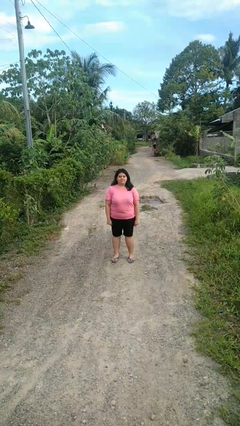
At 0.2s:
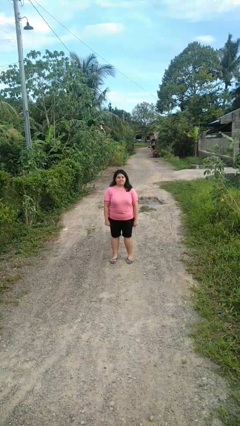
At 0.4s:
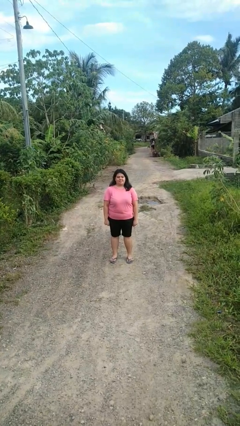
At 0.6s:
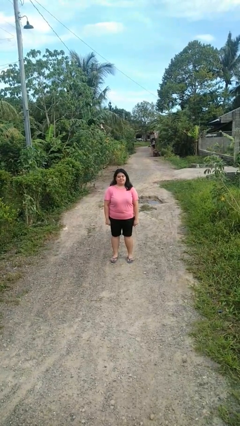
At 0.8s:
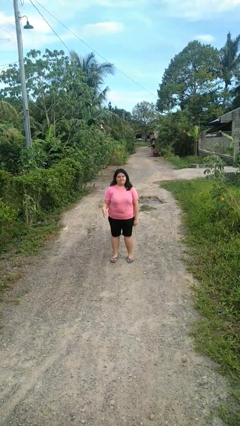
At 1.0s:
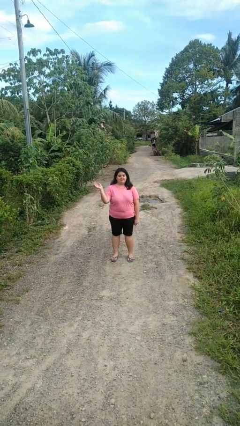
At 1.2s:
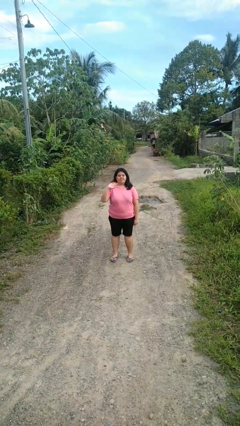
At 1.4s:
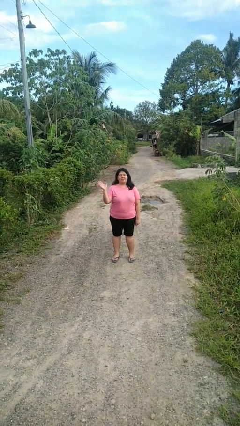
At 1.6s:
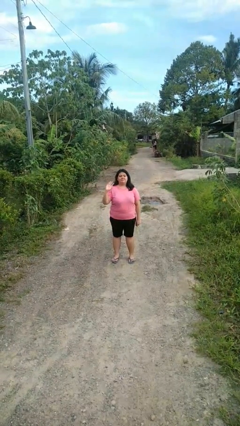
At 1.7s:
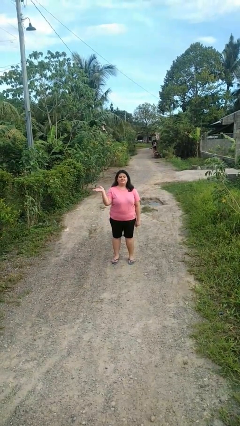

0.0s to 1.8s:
person waves at person

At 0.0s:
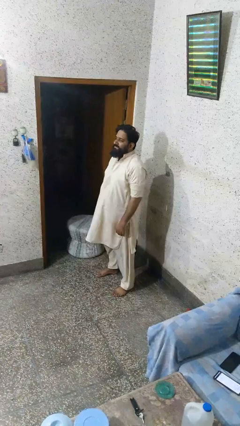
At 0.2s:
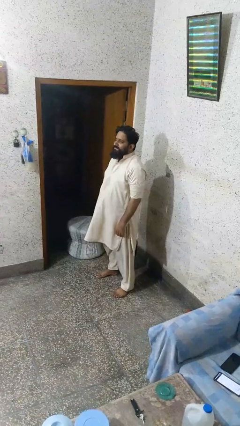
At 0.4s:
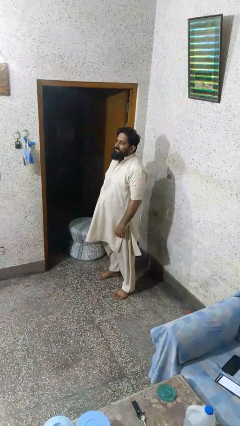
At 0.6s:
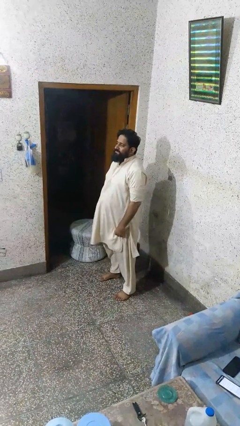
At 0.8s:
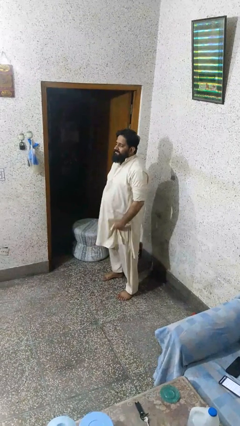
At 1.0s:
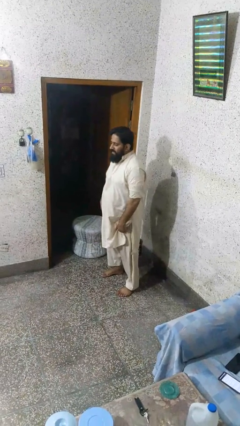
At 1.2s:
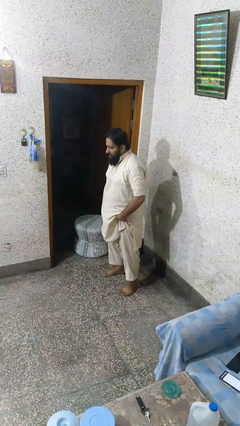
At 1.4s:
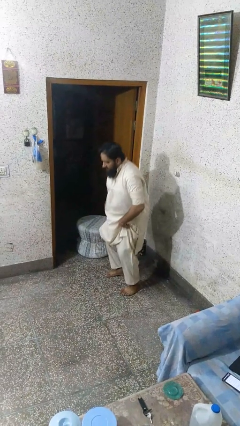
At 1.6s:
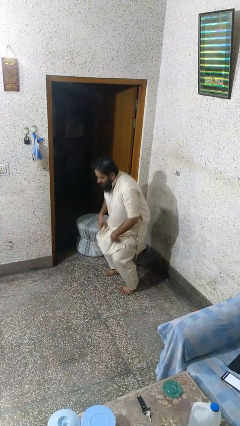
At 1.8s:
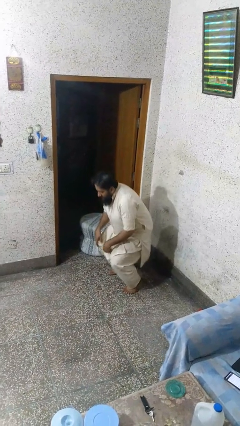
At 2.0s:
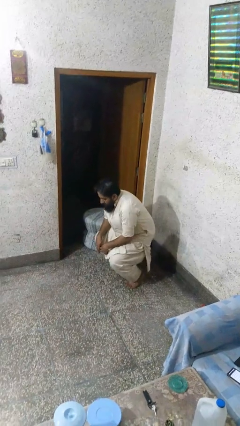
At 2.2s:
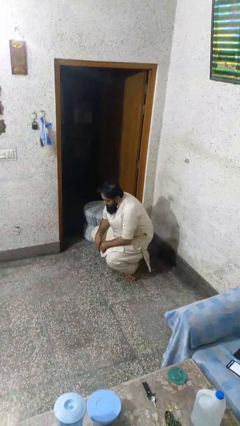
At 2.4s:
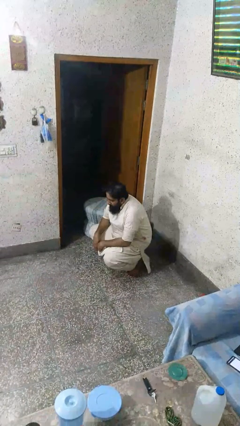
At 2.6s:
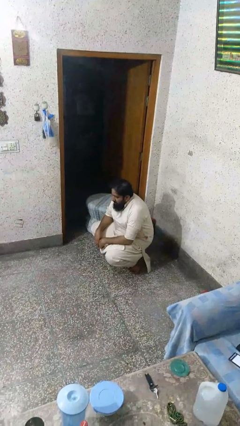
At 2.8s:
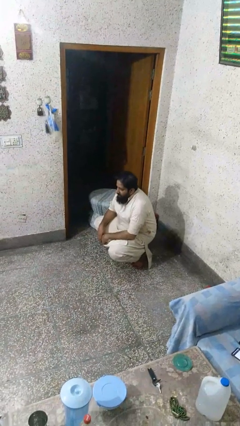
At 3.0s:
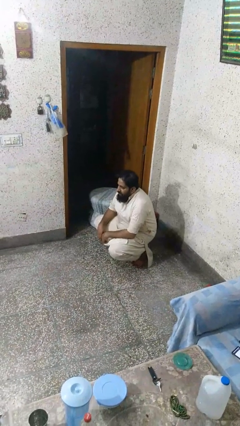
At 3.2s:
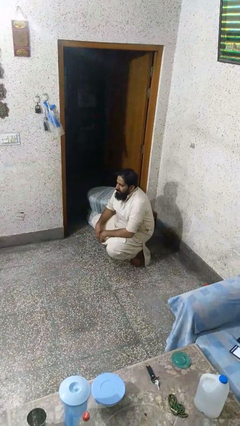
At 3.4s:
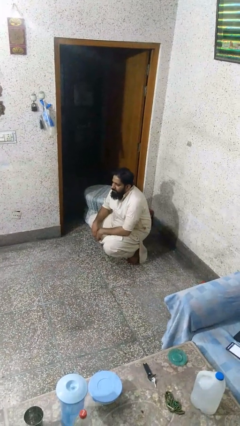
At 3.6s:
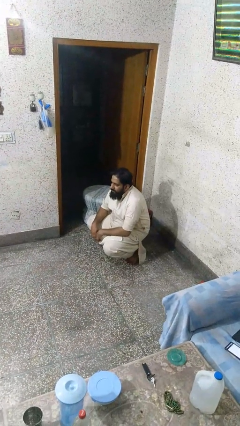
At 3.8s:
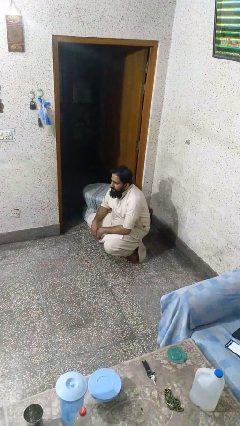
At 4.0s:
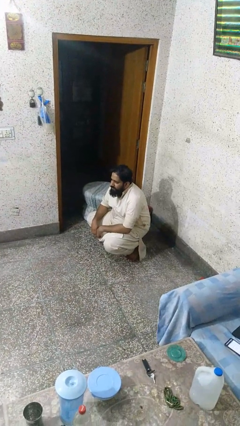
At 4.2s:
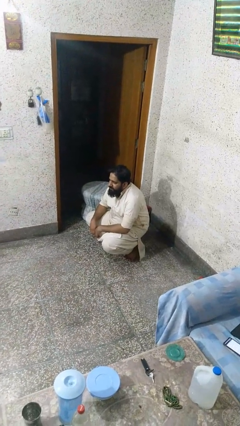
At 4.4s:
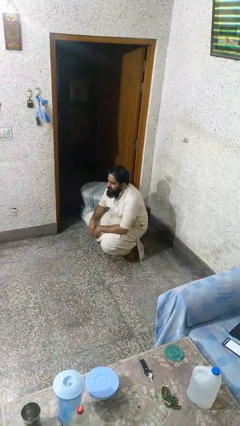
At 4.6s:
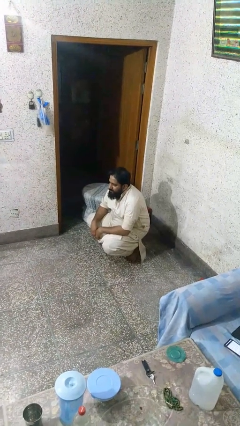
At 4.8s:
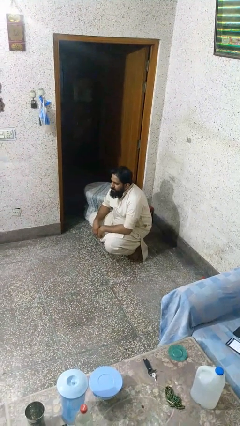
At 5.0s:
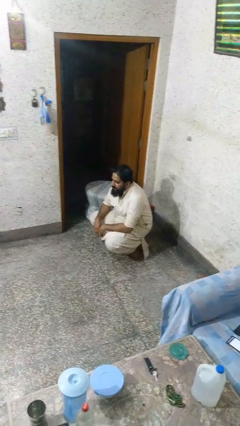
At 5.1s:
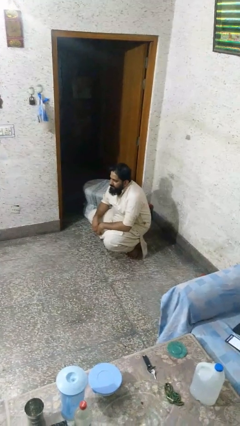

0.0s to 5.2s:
person squats

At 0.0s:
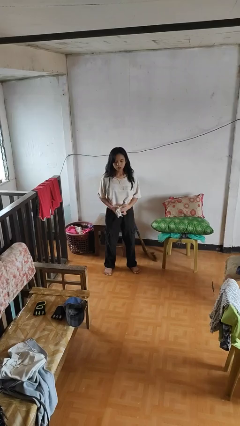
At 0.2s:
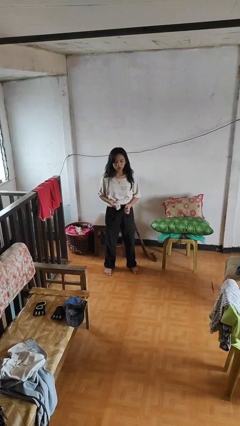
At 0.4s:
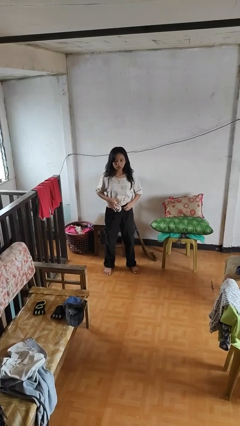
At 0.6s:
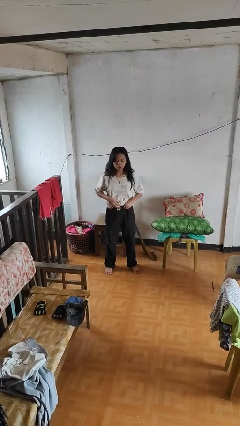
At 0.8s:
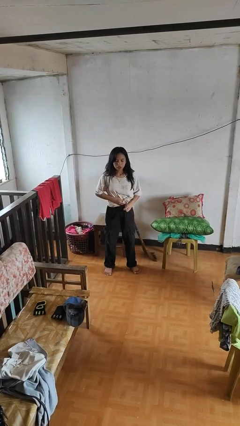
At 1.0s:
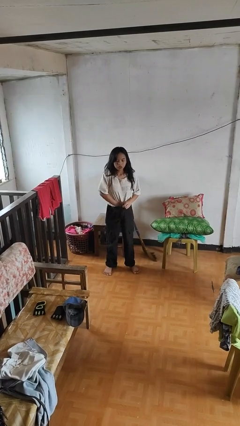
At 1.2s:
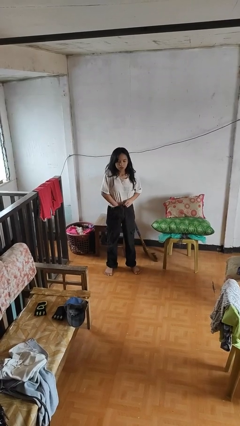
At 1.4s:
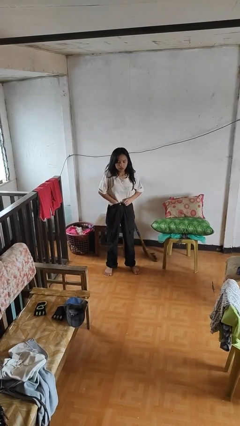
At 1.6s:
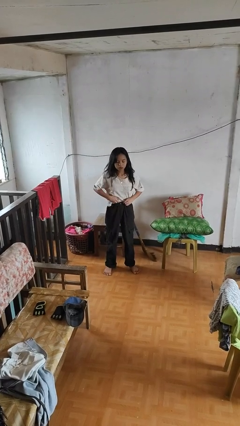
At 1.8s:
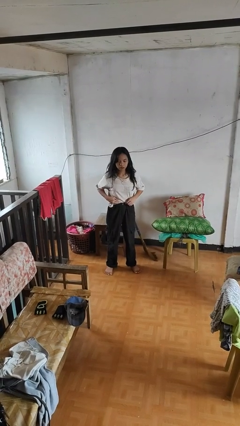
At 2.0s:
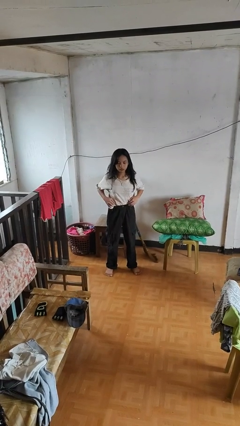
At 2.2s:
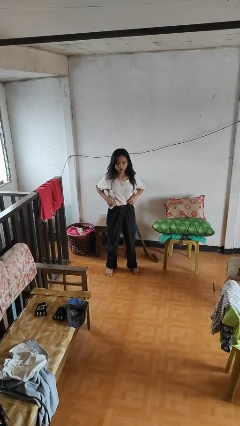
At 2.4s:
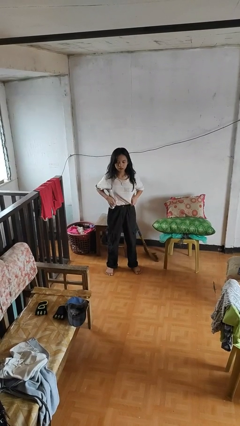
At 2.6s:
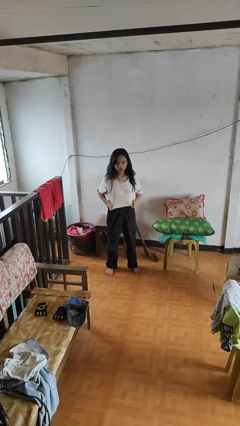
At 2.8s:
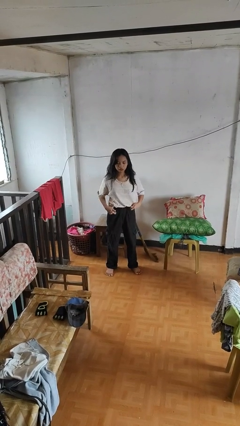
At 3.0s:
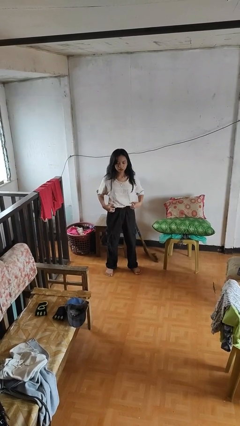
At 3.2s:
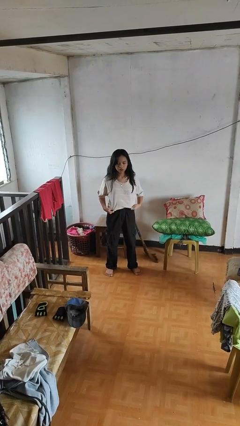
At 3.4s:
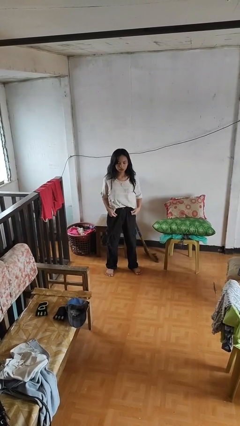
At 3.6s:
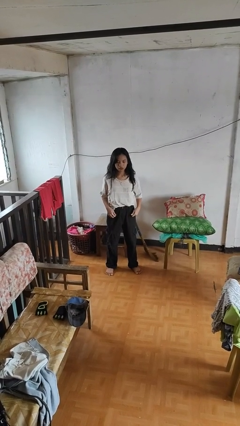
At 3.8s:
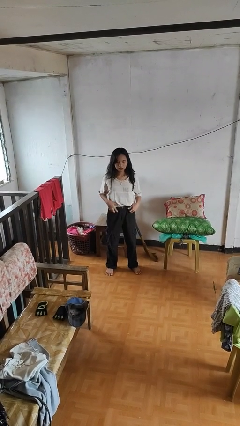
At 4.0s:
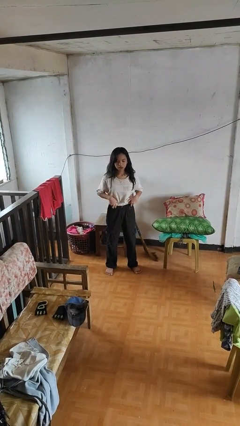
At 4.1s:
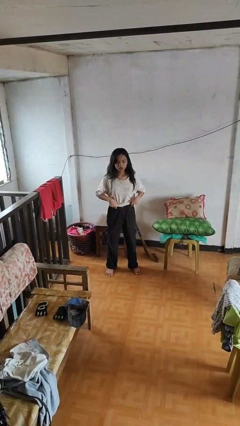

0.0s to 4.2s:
person tucks in shirt

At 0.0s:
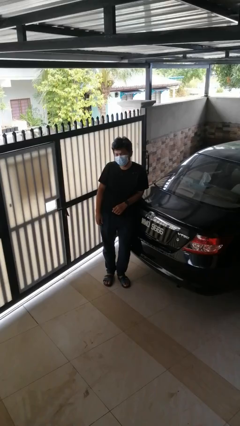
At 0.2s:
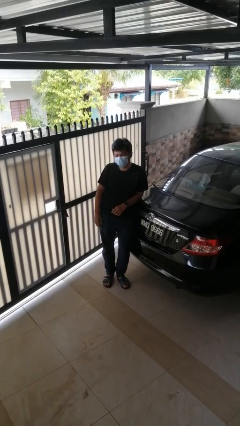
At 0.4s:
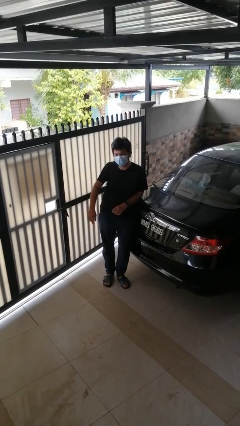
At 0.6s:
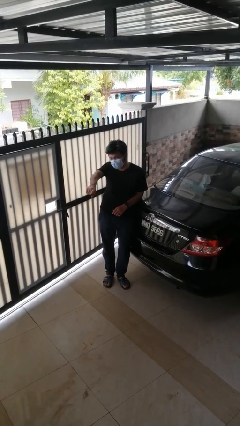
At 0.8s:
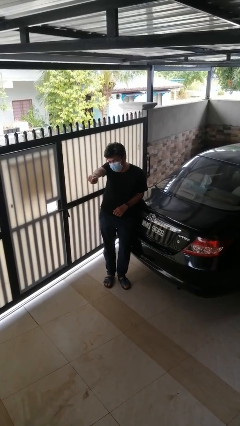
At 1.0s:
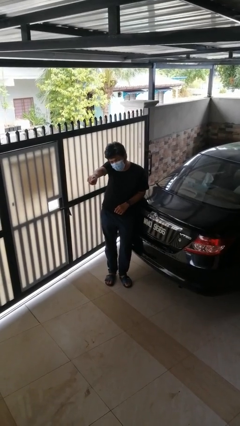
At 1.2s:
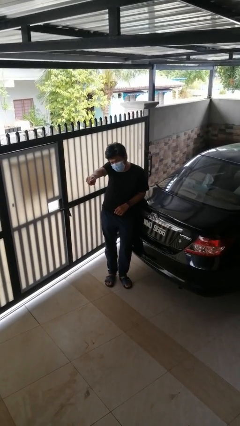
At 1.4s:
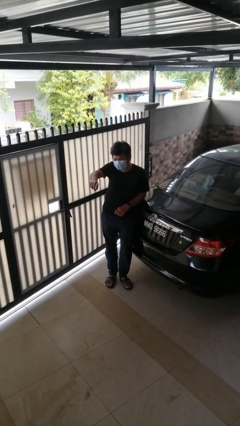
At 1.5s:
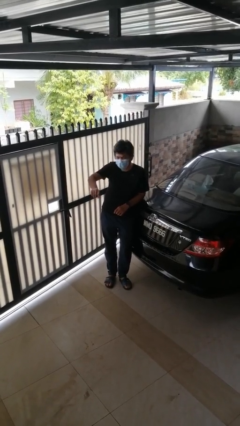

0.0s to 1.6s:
person points at person

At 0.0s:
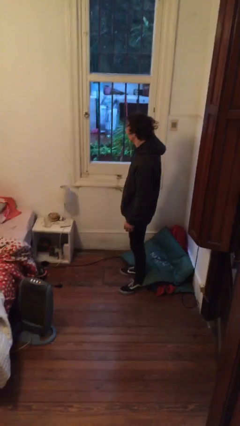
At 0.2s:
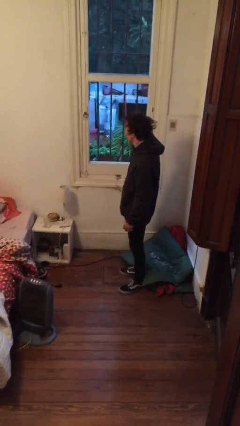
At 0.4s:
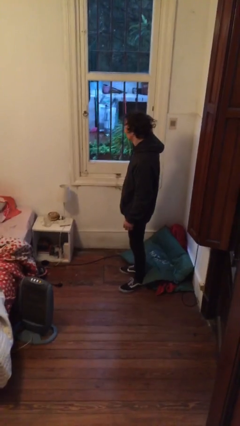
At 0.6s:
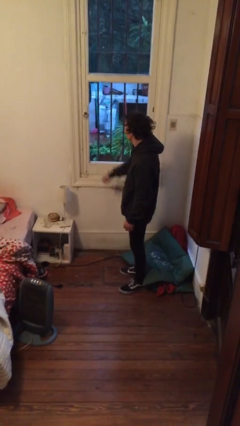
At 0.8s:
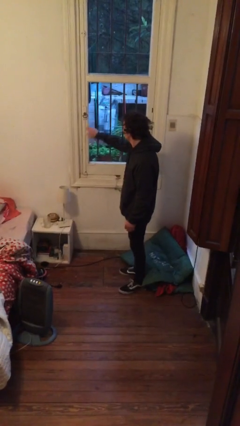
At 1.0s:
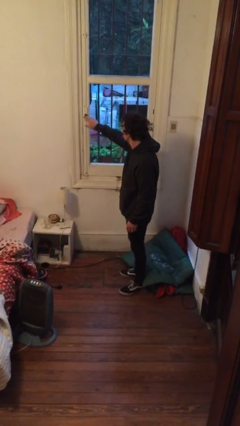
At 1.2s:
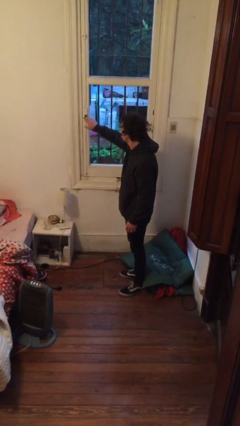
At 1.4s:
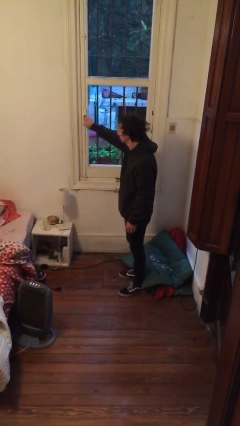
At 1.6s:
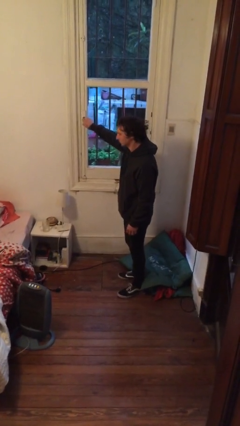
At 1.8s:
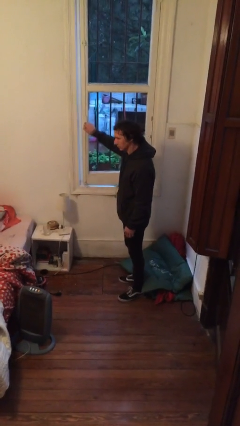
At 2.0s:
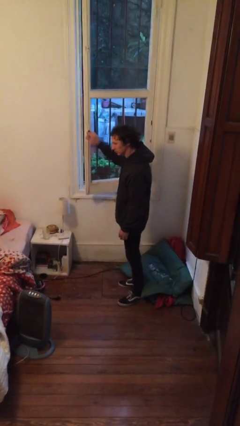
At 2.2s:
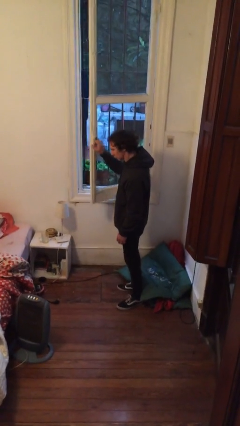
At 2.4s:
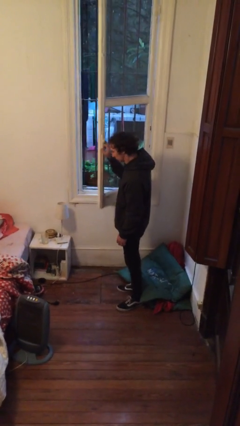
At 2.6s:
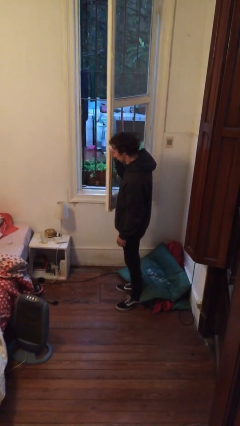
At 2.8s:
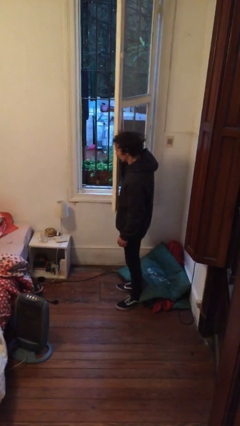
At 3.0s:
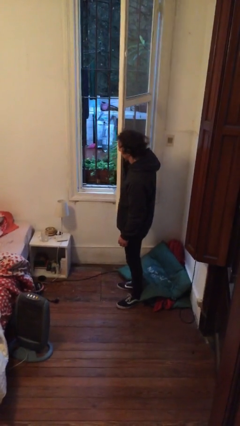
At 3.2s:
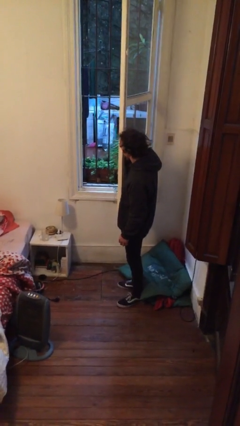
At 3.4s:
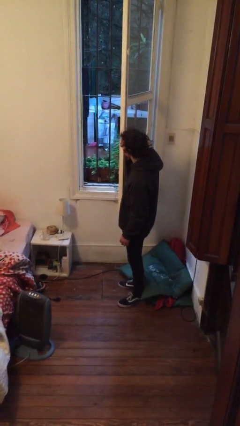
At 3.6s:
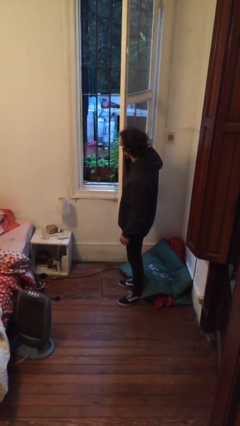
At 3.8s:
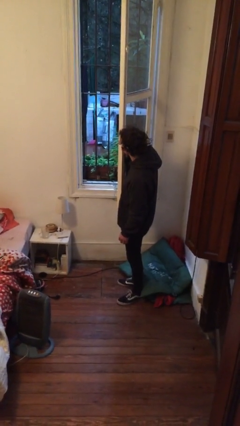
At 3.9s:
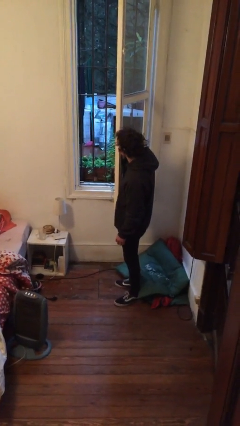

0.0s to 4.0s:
person opens home window

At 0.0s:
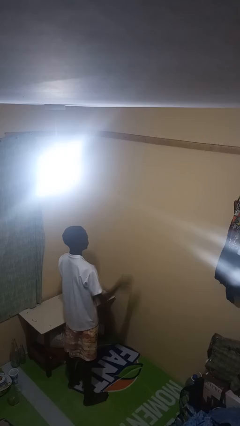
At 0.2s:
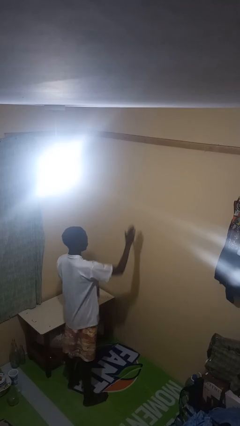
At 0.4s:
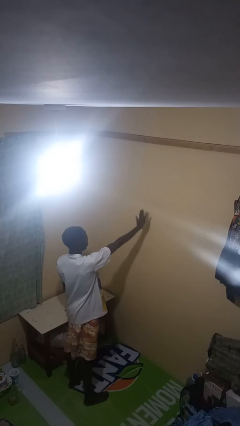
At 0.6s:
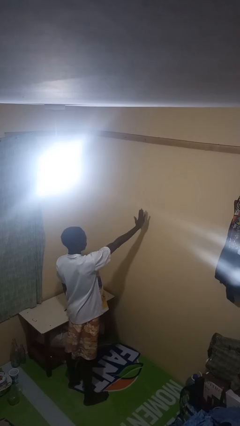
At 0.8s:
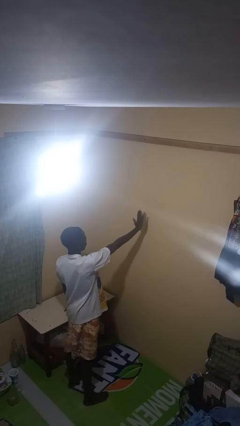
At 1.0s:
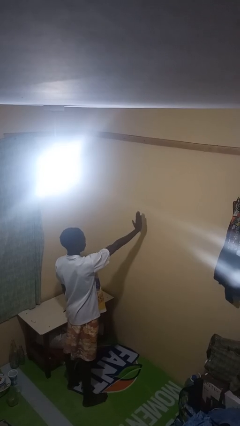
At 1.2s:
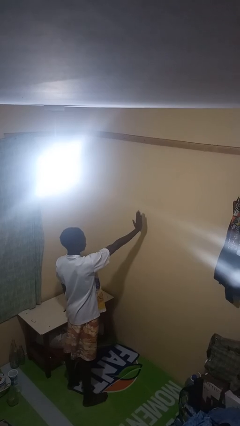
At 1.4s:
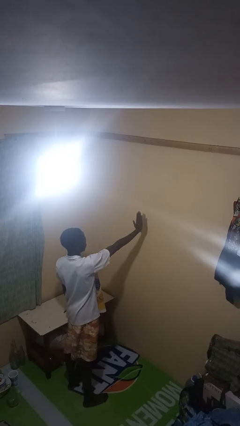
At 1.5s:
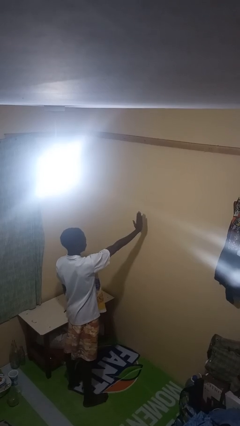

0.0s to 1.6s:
person gestures stop
